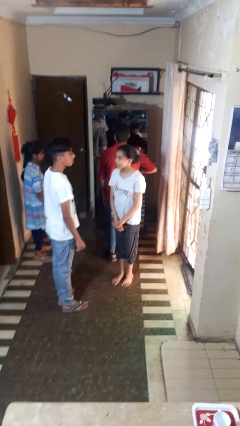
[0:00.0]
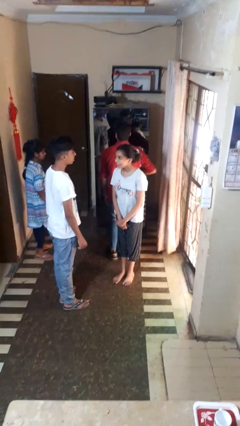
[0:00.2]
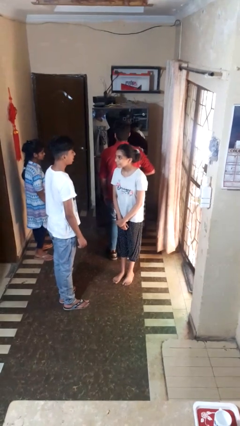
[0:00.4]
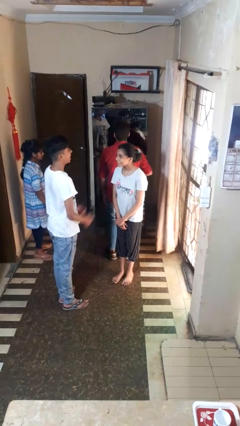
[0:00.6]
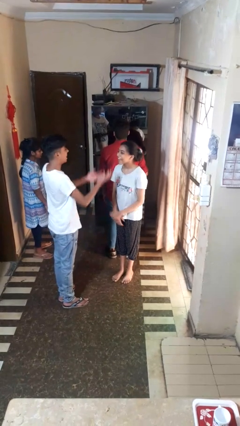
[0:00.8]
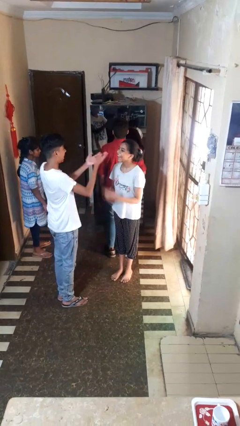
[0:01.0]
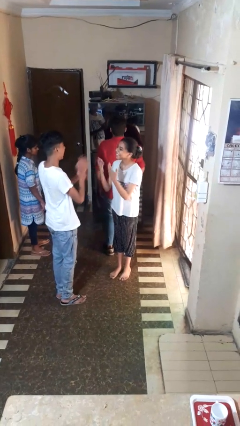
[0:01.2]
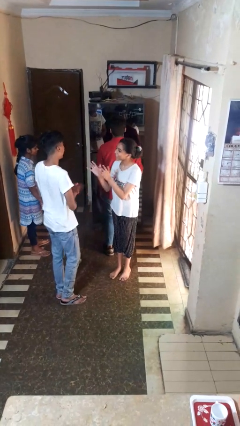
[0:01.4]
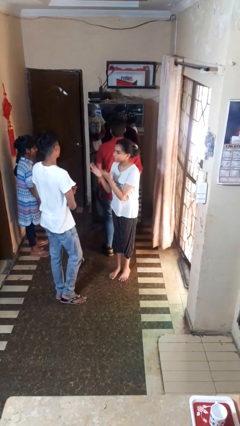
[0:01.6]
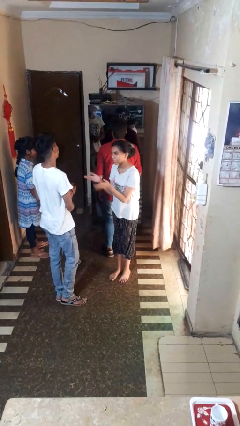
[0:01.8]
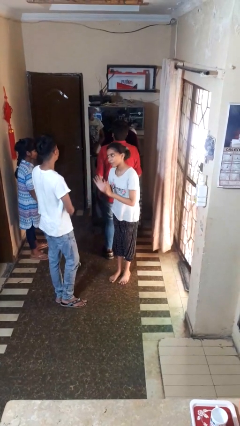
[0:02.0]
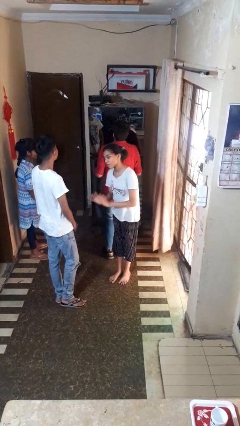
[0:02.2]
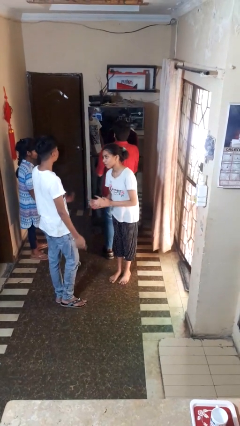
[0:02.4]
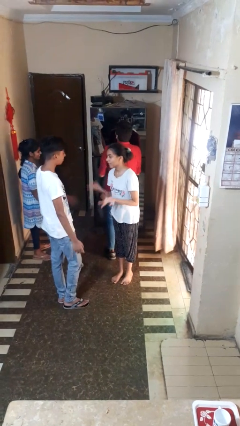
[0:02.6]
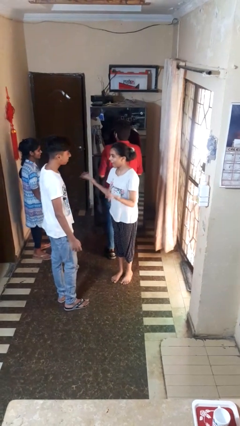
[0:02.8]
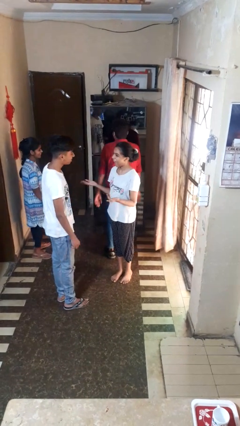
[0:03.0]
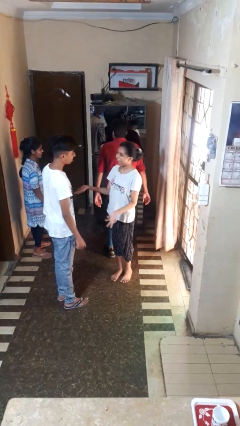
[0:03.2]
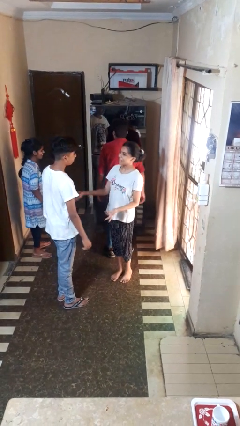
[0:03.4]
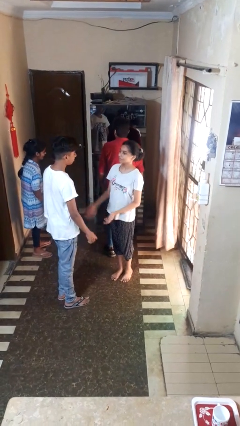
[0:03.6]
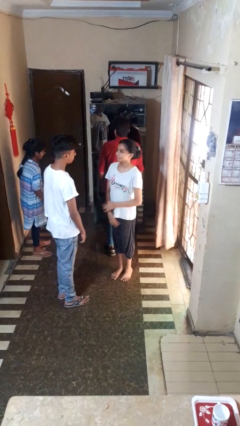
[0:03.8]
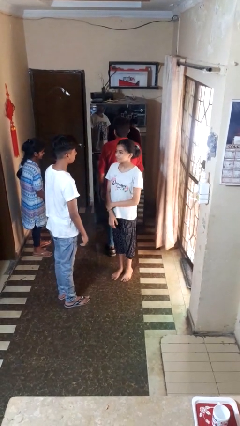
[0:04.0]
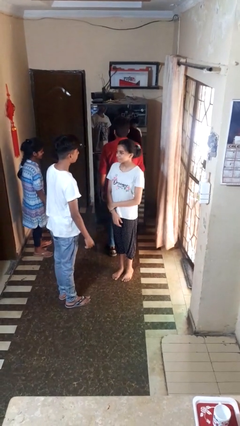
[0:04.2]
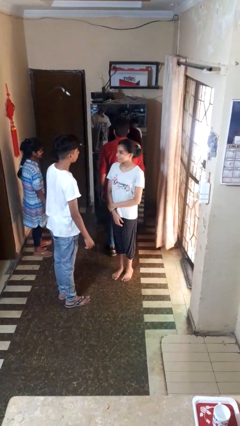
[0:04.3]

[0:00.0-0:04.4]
person laughs with person

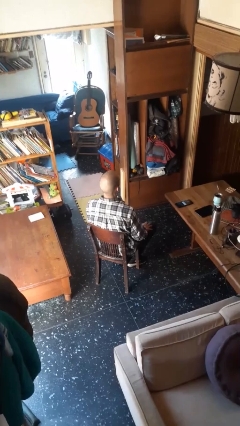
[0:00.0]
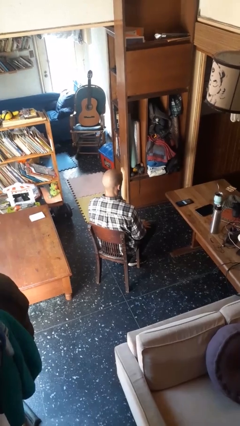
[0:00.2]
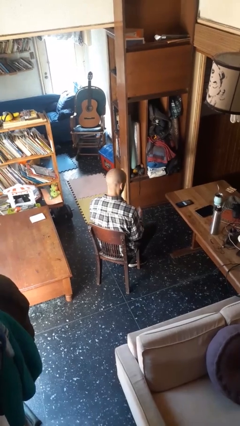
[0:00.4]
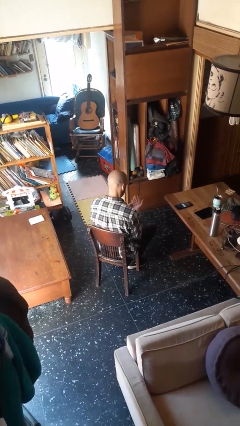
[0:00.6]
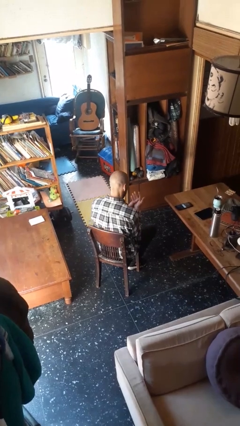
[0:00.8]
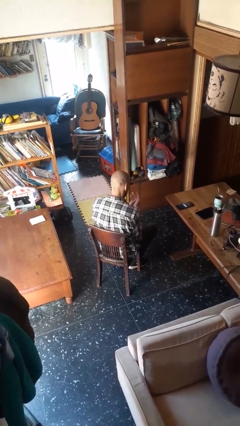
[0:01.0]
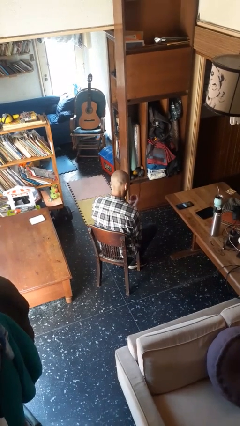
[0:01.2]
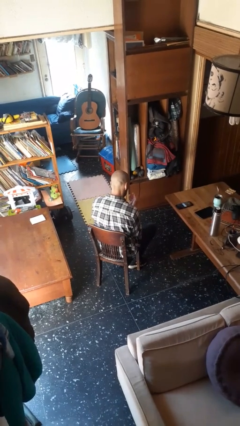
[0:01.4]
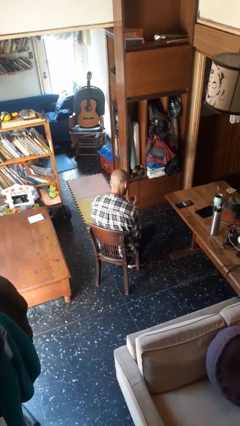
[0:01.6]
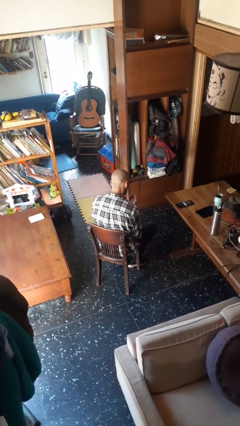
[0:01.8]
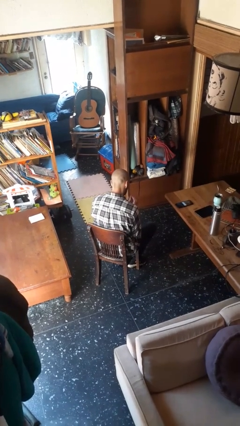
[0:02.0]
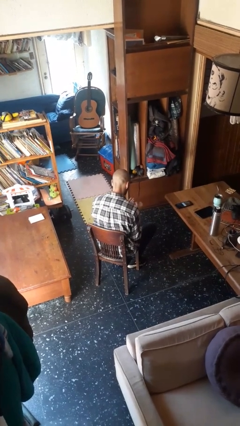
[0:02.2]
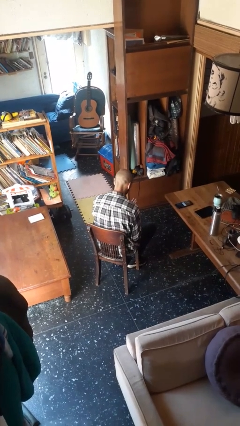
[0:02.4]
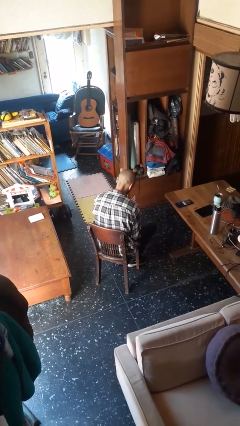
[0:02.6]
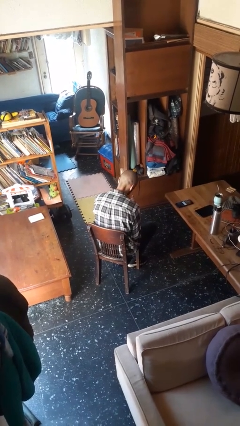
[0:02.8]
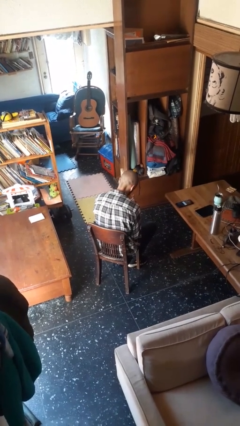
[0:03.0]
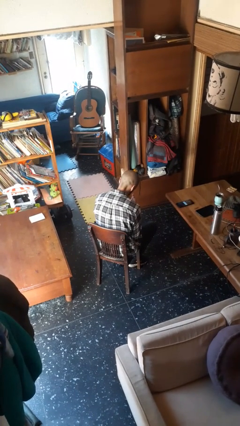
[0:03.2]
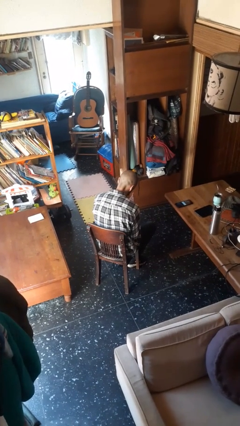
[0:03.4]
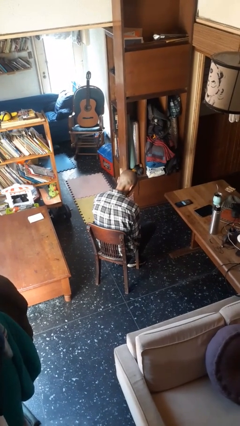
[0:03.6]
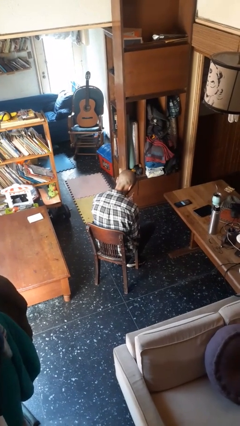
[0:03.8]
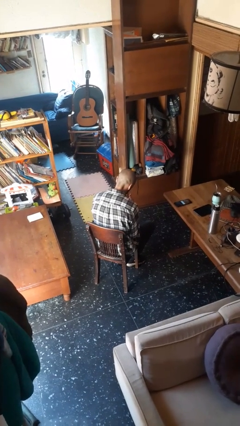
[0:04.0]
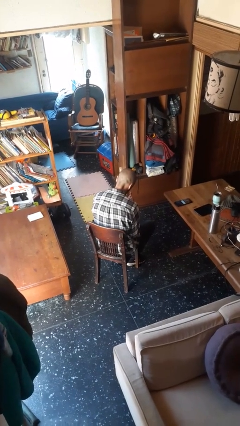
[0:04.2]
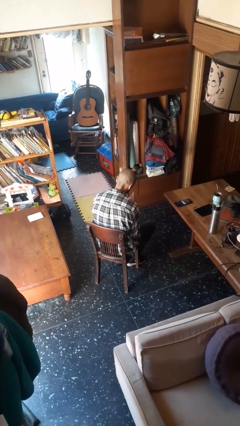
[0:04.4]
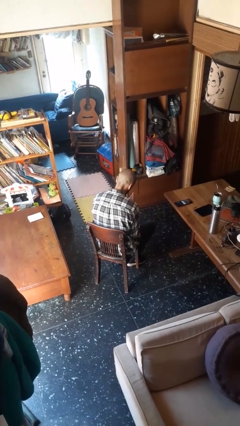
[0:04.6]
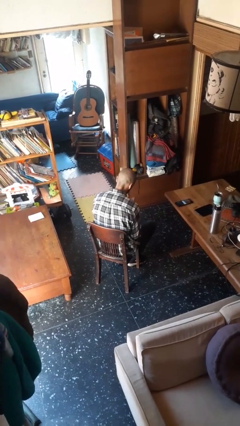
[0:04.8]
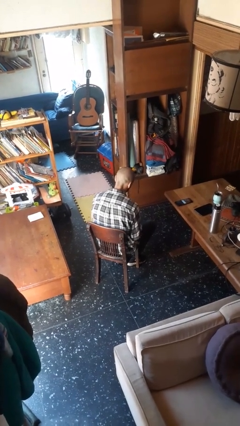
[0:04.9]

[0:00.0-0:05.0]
person looks at hands in lap

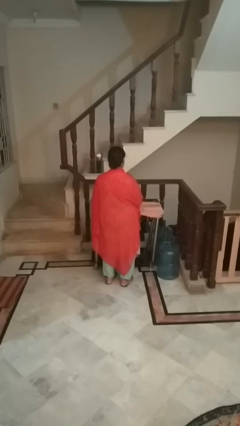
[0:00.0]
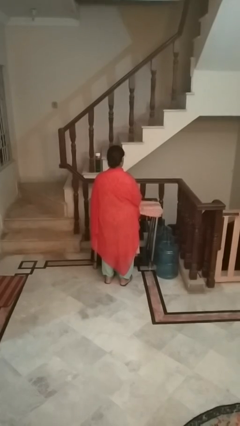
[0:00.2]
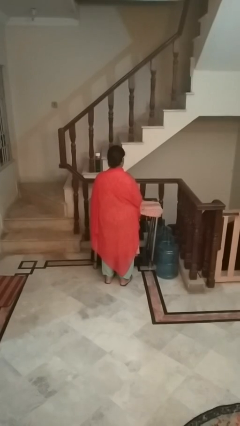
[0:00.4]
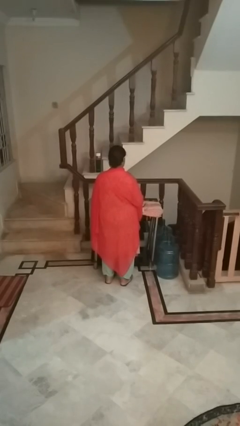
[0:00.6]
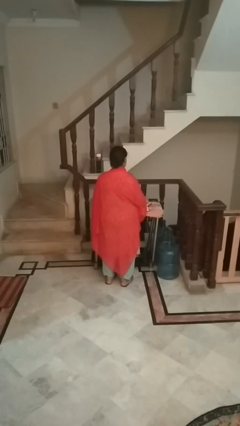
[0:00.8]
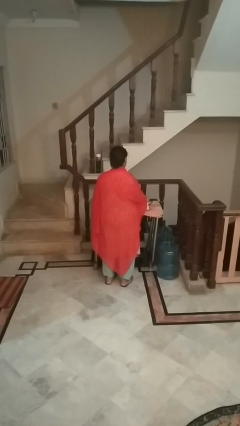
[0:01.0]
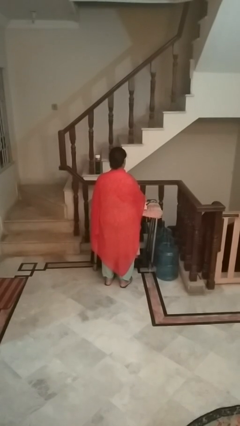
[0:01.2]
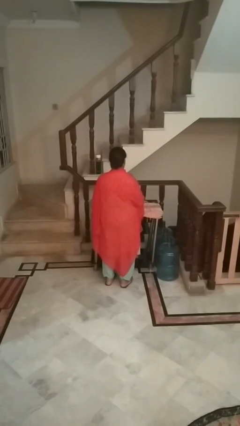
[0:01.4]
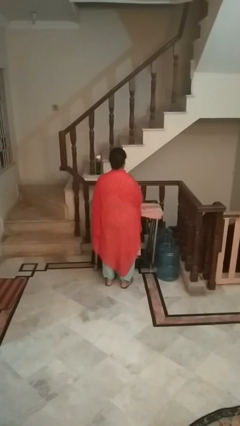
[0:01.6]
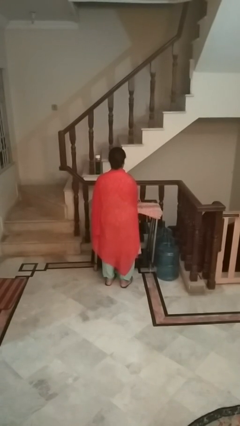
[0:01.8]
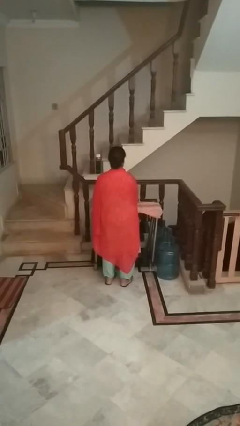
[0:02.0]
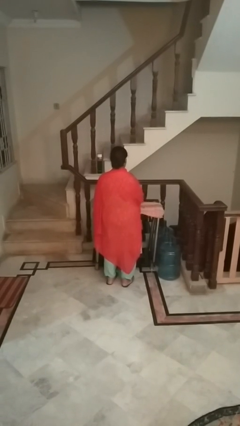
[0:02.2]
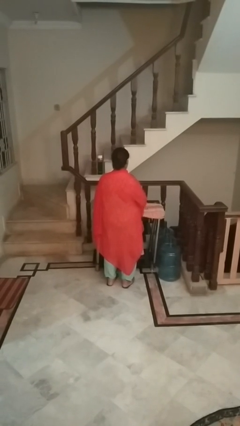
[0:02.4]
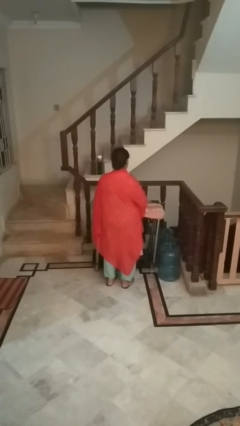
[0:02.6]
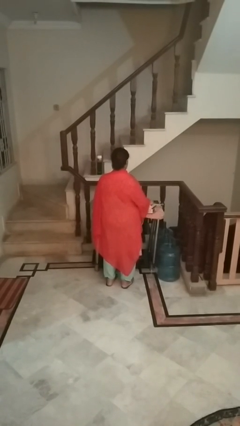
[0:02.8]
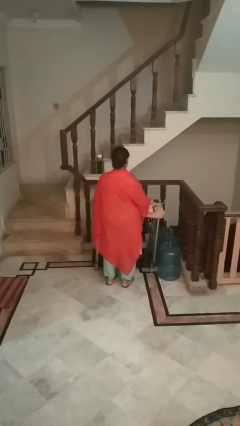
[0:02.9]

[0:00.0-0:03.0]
person irons clothes

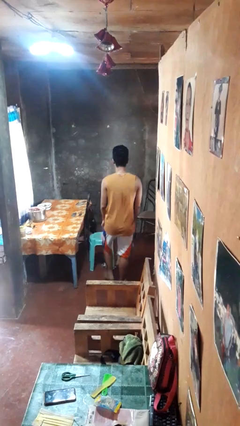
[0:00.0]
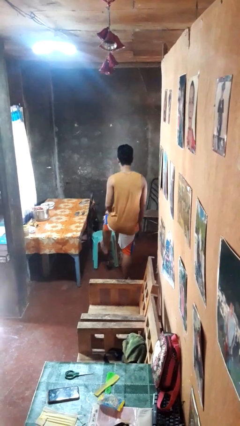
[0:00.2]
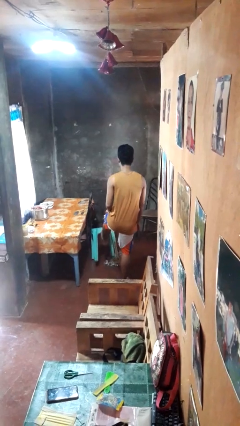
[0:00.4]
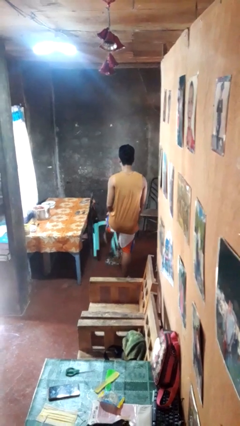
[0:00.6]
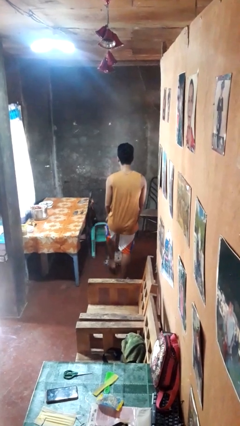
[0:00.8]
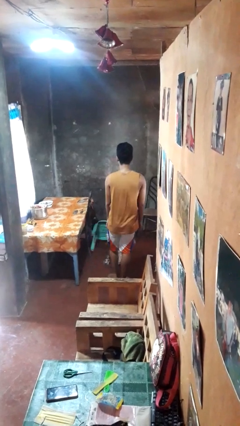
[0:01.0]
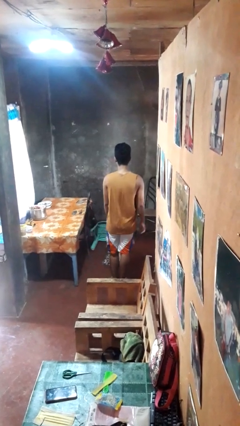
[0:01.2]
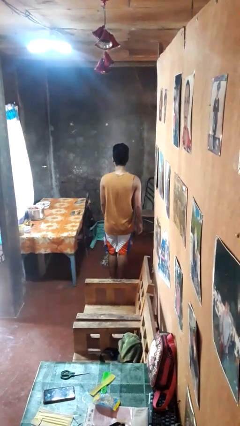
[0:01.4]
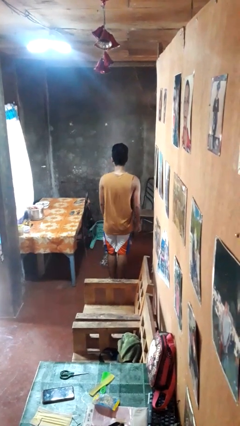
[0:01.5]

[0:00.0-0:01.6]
person knocks over furniture

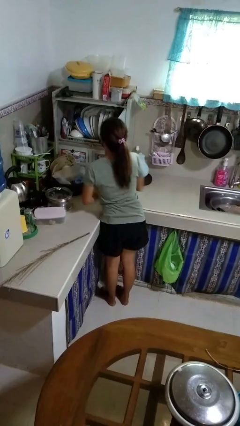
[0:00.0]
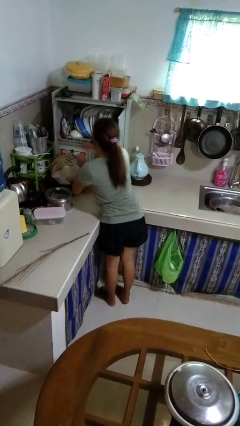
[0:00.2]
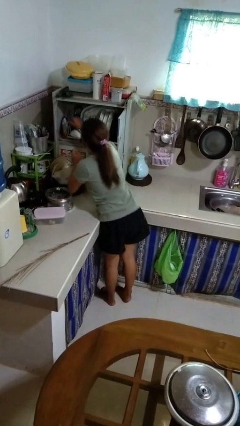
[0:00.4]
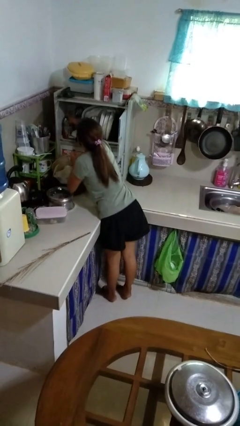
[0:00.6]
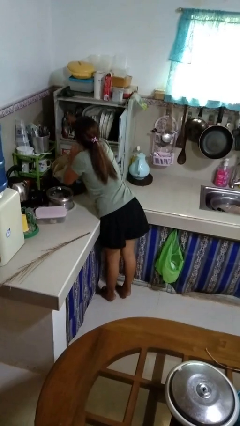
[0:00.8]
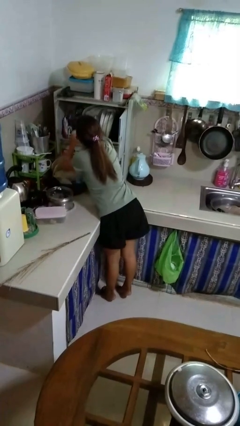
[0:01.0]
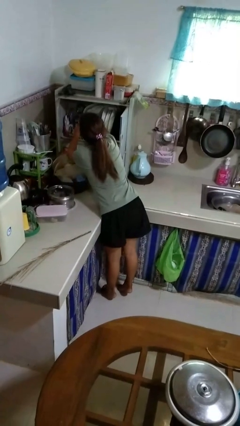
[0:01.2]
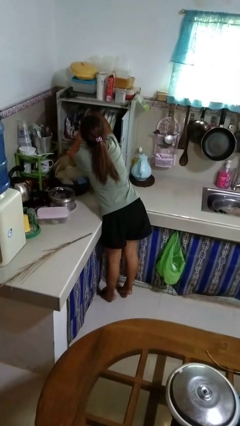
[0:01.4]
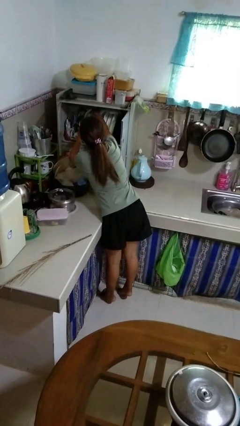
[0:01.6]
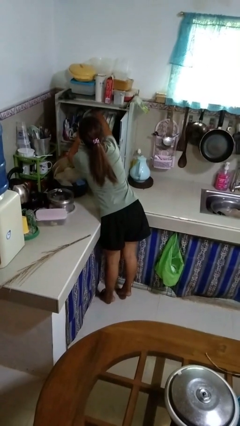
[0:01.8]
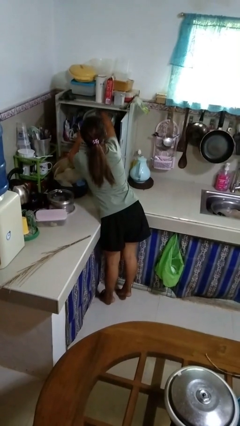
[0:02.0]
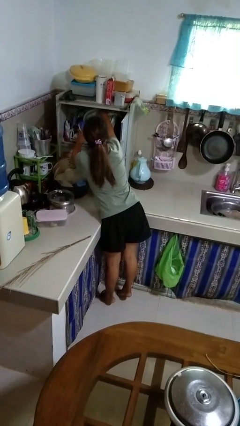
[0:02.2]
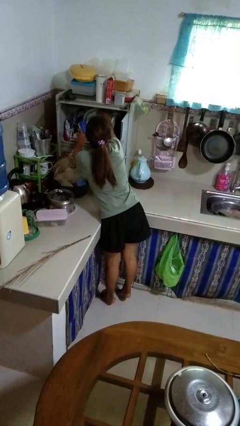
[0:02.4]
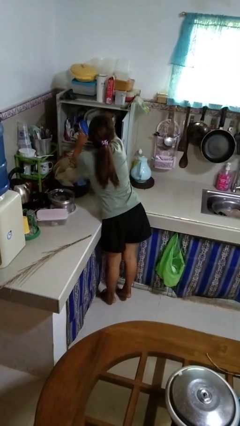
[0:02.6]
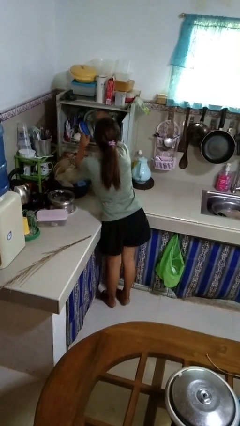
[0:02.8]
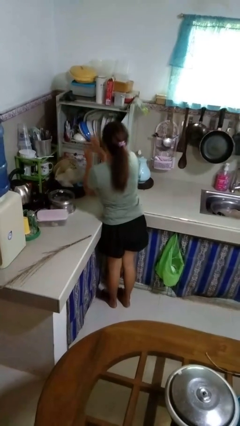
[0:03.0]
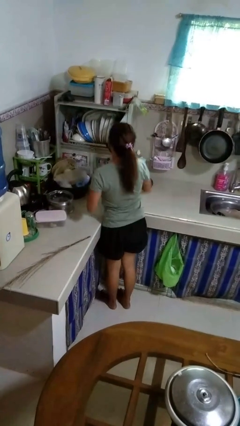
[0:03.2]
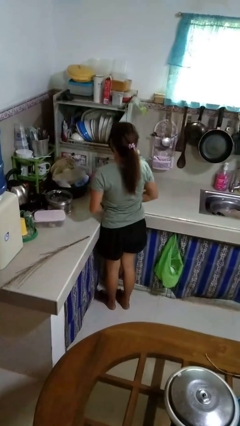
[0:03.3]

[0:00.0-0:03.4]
person searches in kitchen drawer

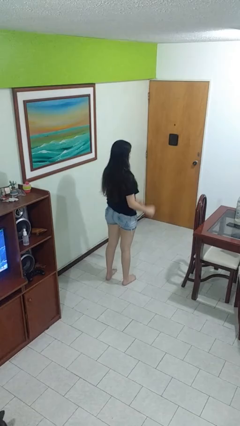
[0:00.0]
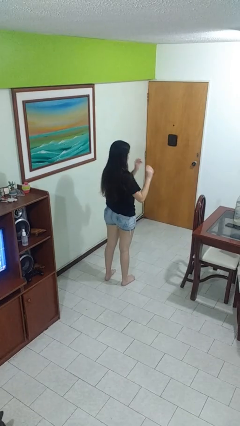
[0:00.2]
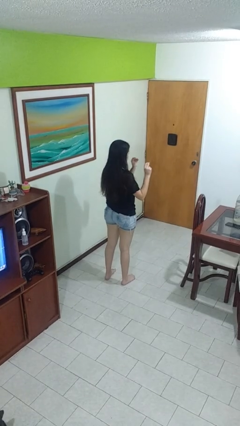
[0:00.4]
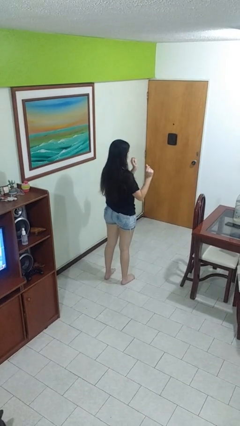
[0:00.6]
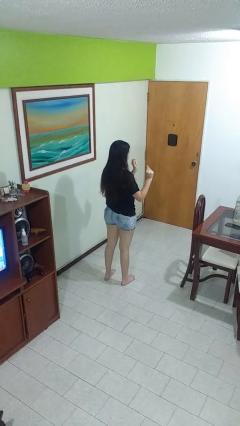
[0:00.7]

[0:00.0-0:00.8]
person snaps fingers
